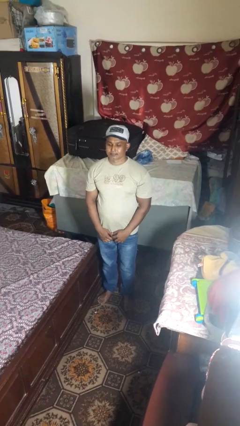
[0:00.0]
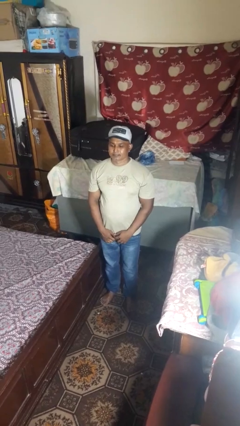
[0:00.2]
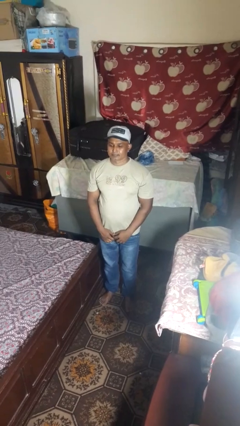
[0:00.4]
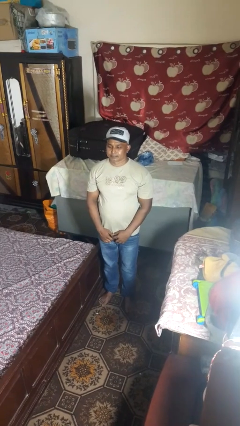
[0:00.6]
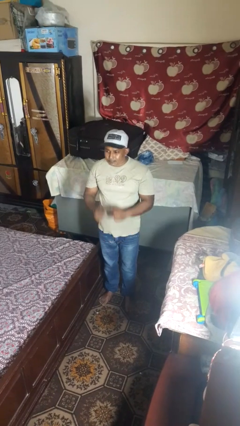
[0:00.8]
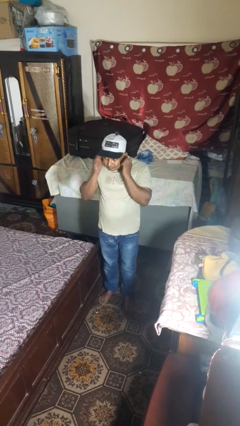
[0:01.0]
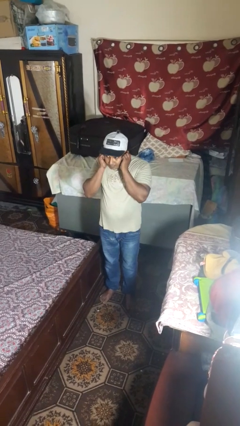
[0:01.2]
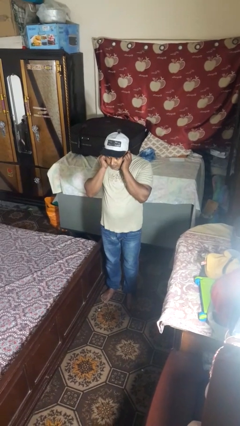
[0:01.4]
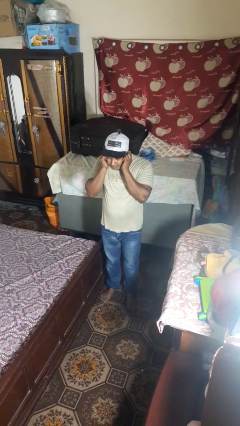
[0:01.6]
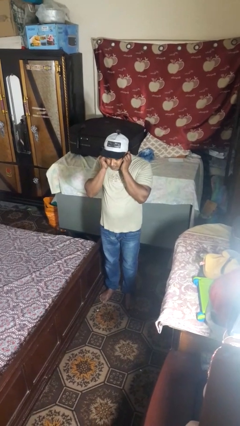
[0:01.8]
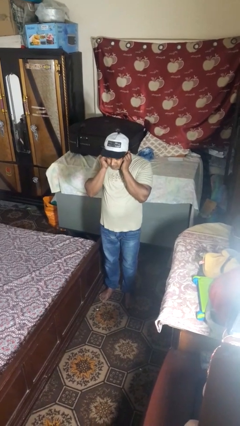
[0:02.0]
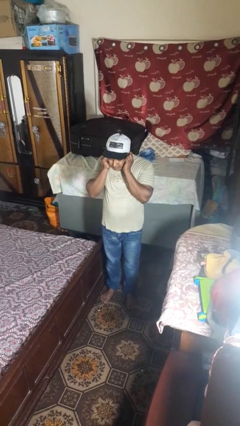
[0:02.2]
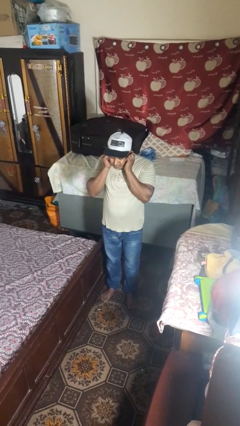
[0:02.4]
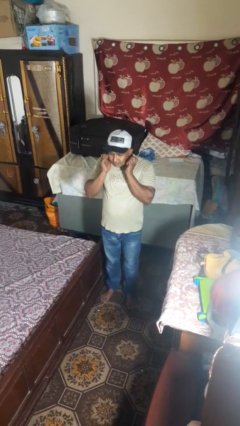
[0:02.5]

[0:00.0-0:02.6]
person puts fingers in ear

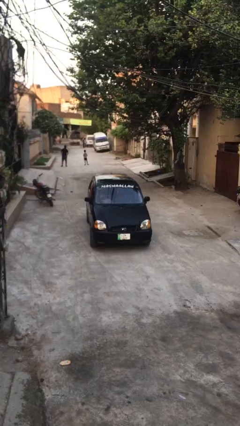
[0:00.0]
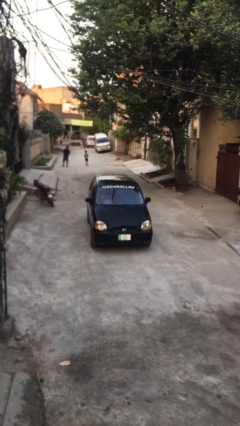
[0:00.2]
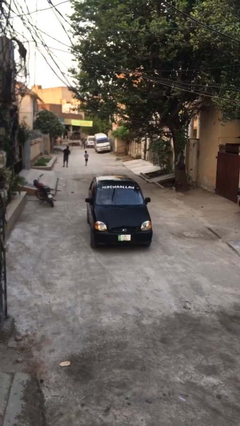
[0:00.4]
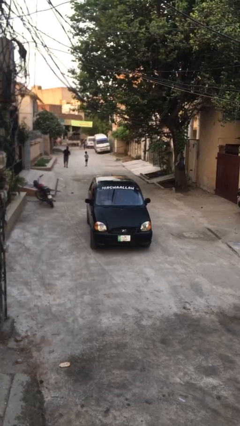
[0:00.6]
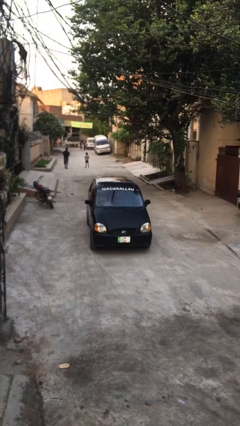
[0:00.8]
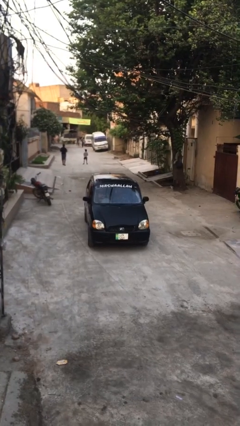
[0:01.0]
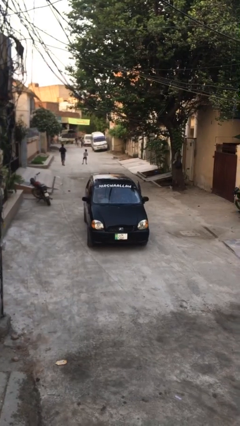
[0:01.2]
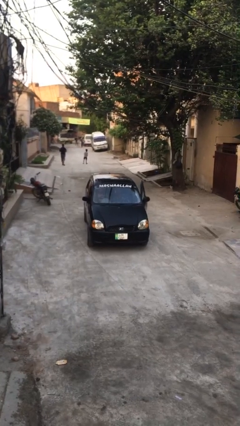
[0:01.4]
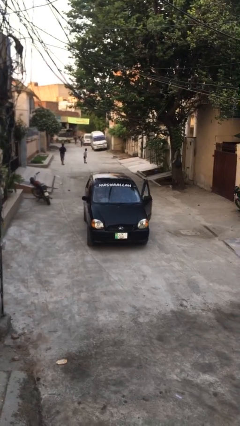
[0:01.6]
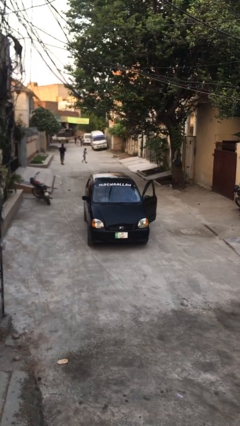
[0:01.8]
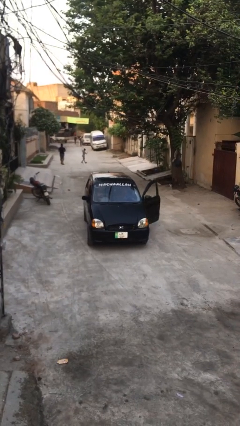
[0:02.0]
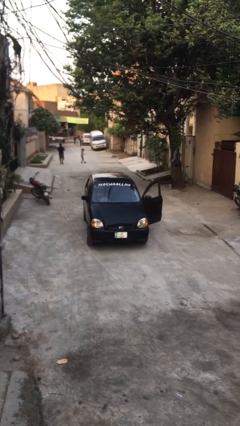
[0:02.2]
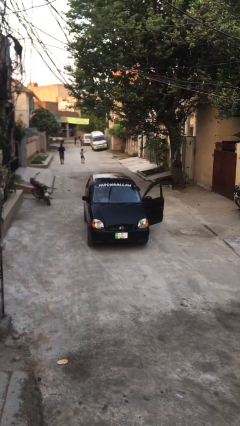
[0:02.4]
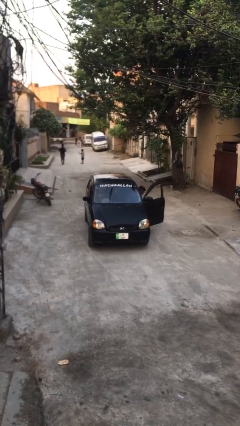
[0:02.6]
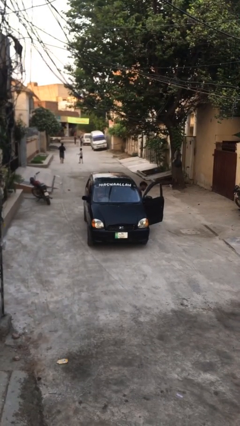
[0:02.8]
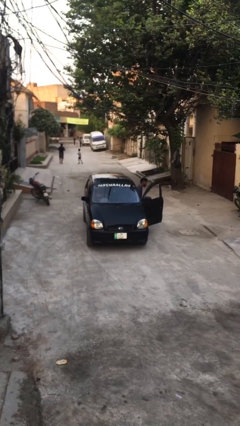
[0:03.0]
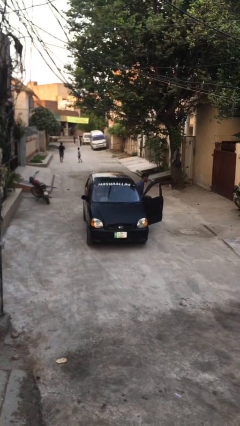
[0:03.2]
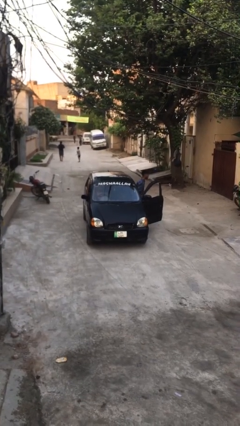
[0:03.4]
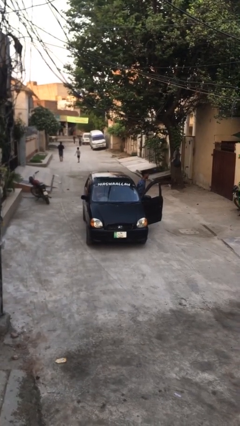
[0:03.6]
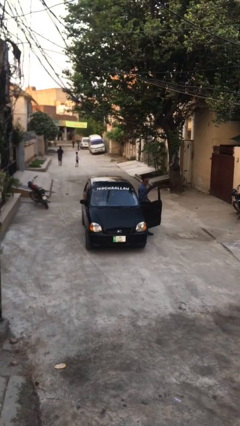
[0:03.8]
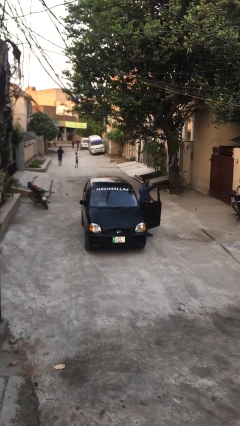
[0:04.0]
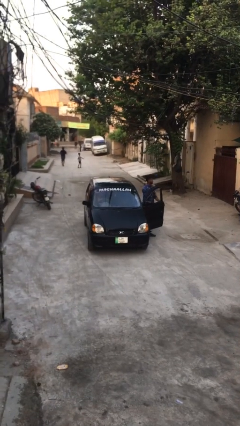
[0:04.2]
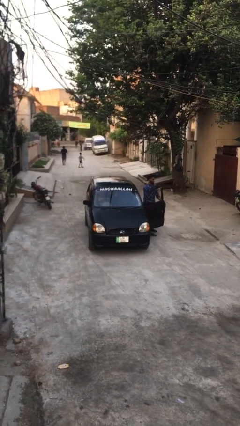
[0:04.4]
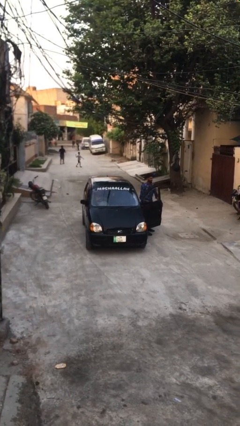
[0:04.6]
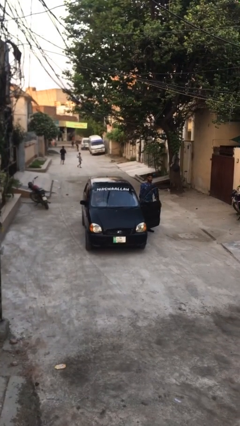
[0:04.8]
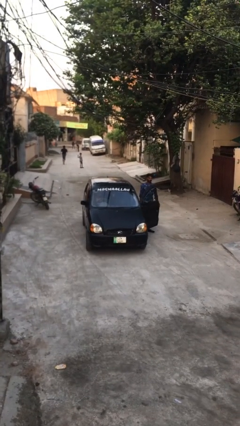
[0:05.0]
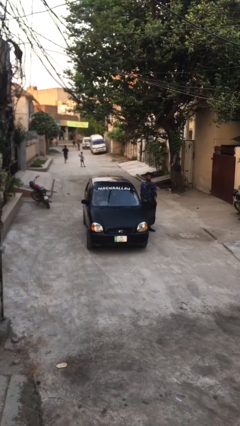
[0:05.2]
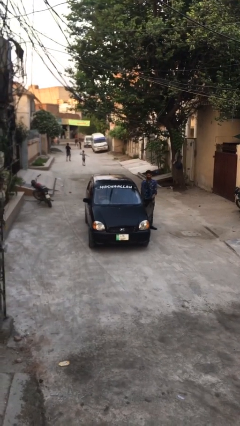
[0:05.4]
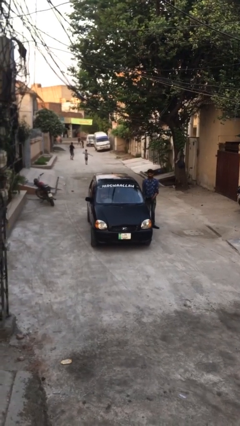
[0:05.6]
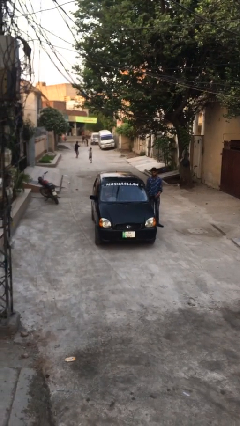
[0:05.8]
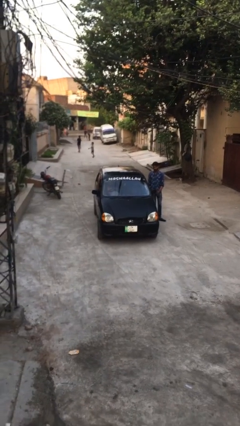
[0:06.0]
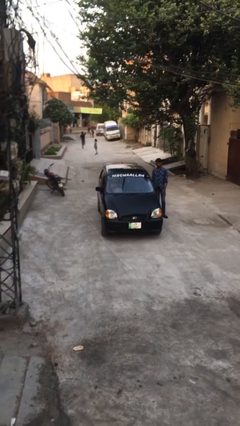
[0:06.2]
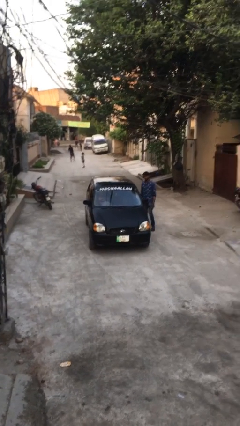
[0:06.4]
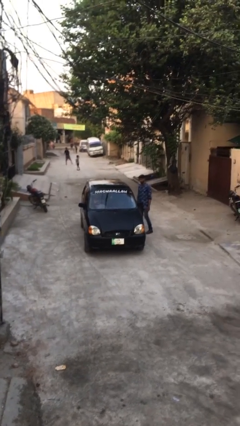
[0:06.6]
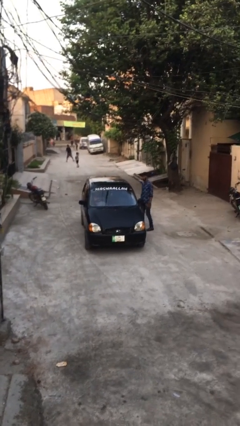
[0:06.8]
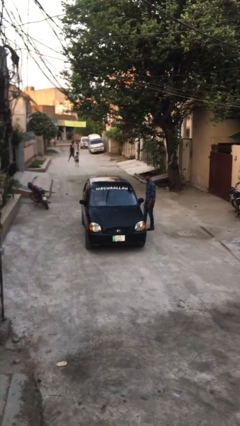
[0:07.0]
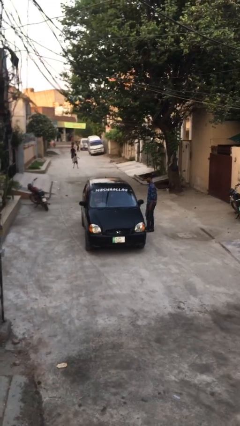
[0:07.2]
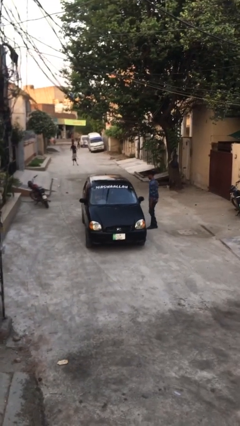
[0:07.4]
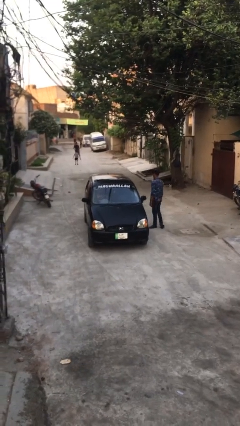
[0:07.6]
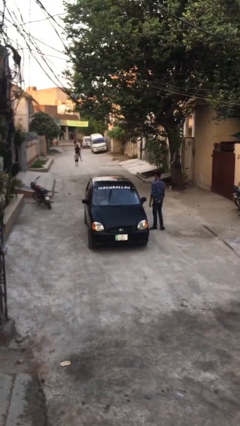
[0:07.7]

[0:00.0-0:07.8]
car drops off person

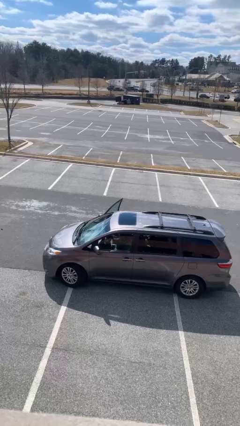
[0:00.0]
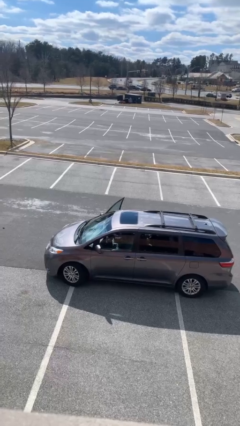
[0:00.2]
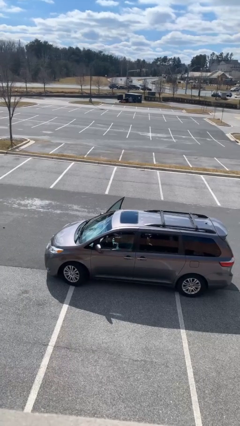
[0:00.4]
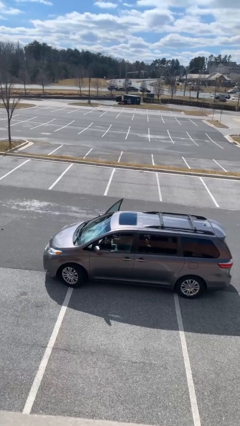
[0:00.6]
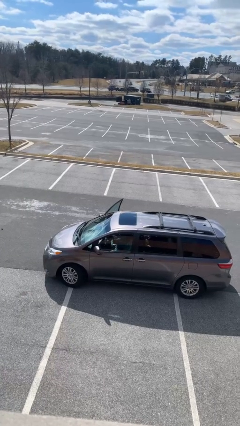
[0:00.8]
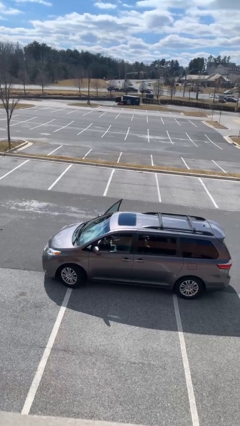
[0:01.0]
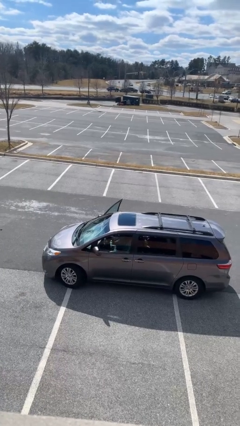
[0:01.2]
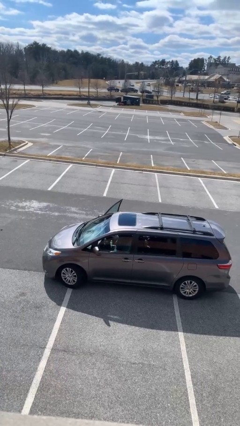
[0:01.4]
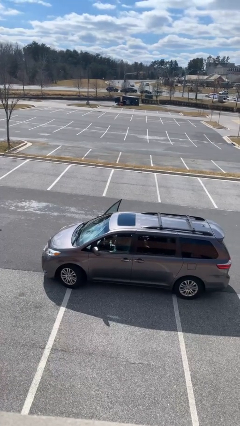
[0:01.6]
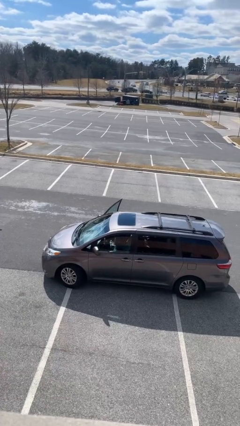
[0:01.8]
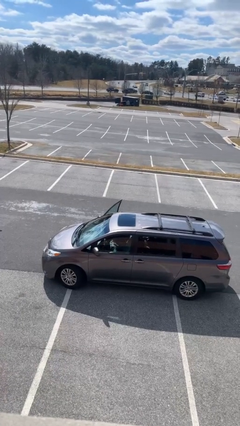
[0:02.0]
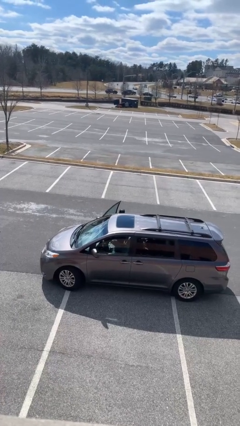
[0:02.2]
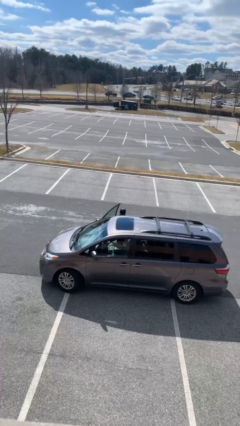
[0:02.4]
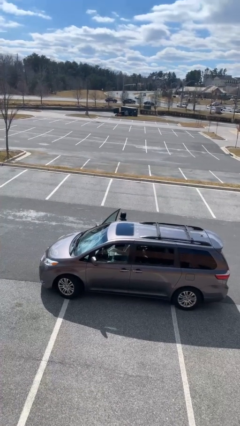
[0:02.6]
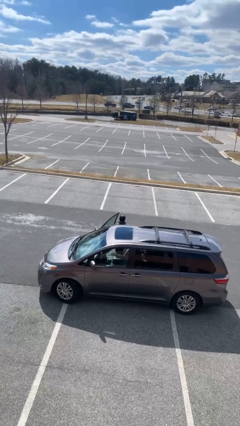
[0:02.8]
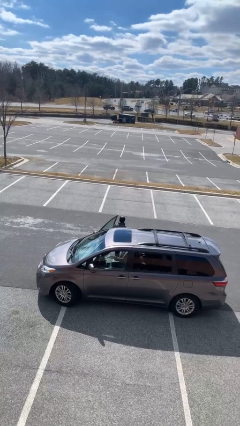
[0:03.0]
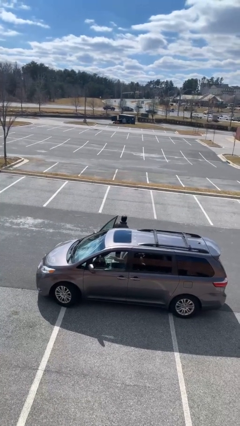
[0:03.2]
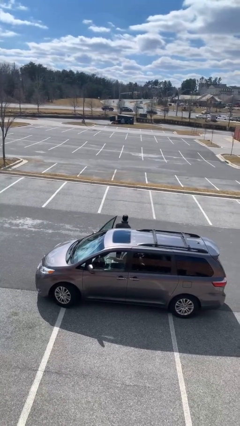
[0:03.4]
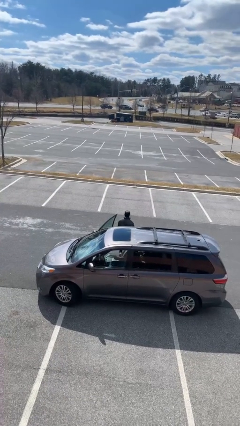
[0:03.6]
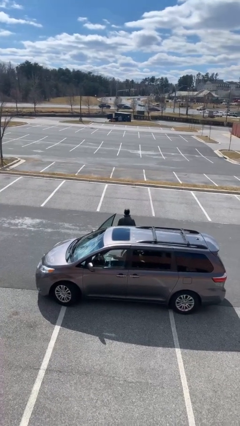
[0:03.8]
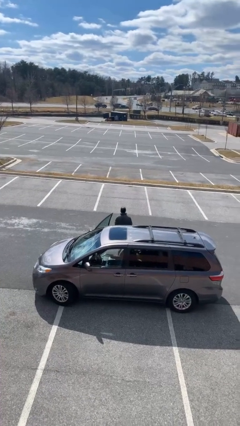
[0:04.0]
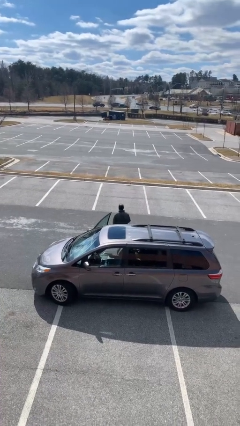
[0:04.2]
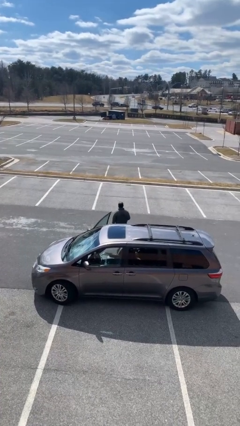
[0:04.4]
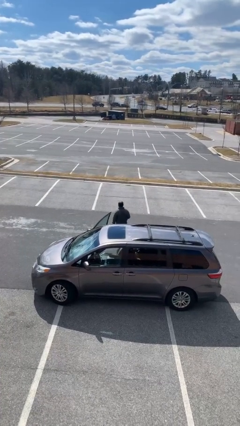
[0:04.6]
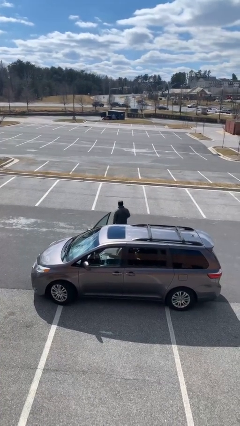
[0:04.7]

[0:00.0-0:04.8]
person exits car

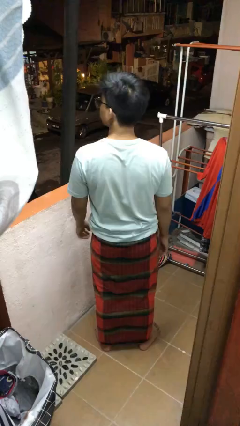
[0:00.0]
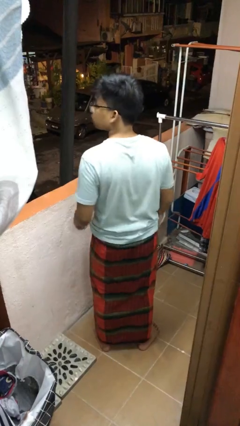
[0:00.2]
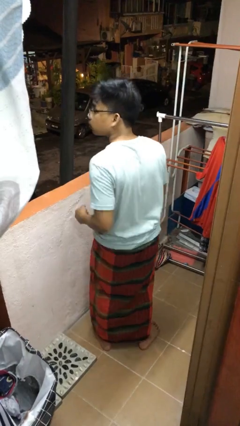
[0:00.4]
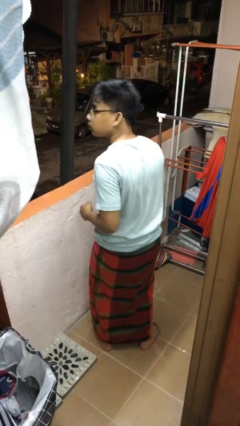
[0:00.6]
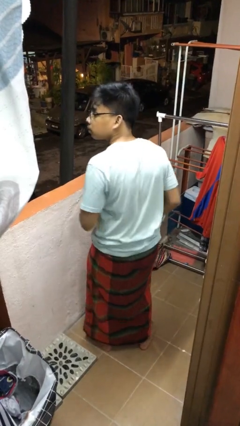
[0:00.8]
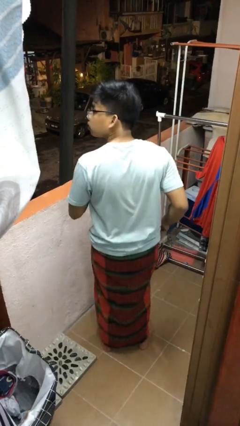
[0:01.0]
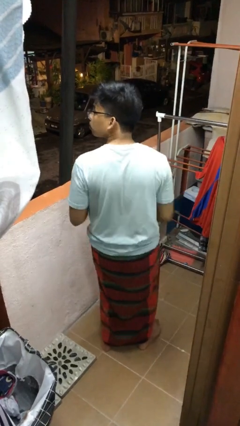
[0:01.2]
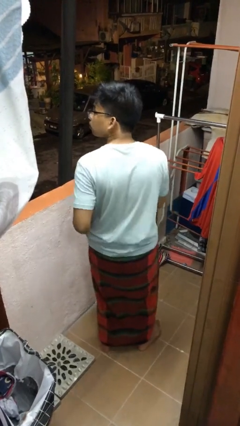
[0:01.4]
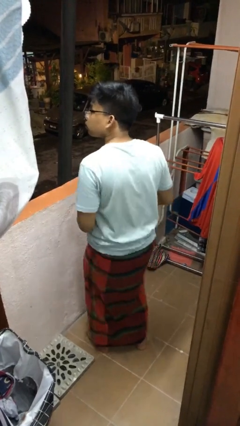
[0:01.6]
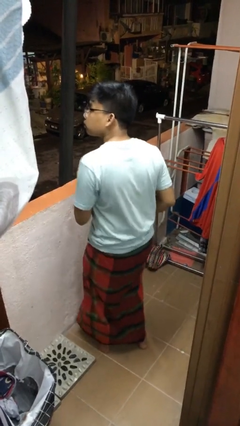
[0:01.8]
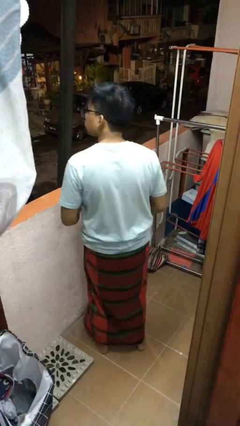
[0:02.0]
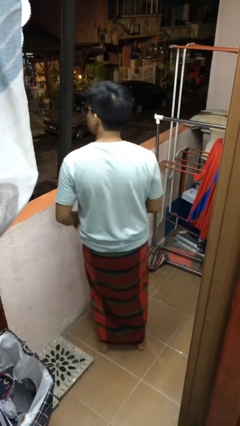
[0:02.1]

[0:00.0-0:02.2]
person dances in place
